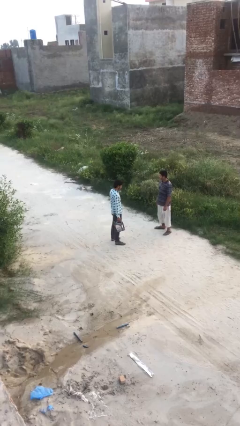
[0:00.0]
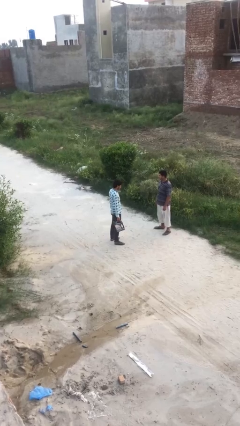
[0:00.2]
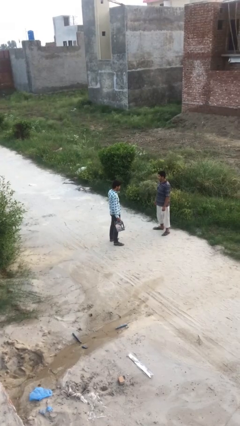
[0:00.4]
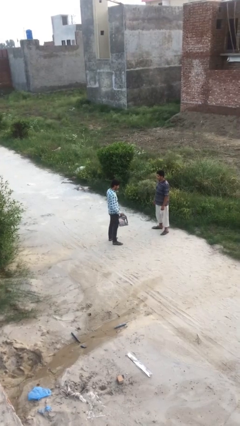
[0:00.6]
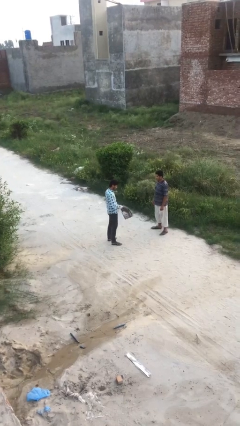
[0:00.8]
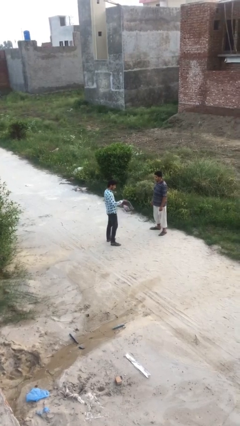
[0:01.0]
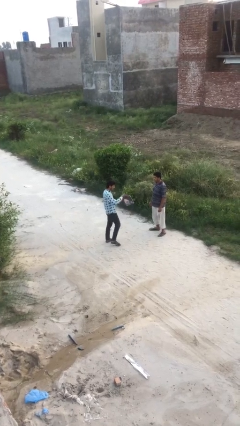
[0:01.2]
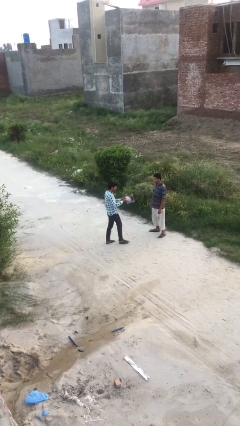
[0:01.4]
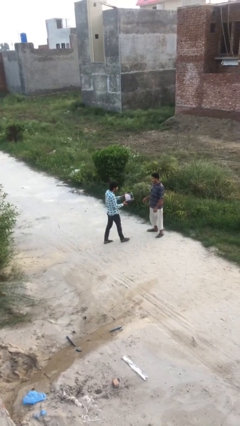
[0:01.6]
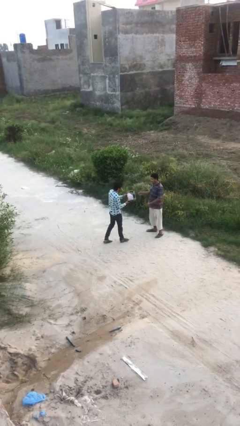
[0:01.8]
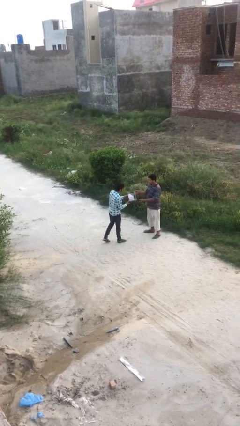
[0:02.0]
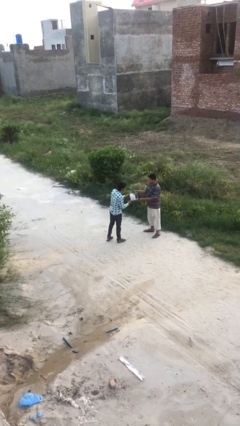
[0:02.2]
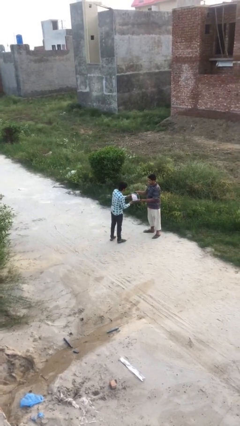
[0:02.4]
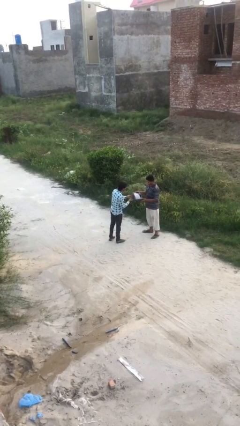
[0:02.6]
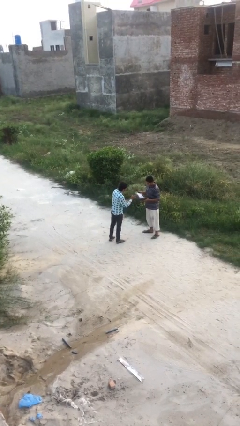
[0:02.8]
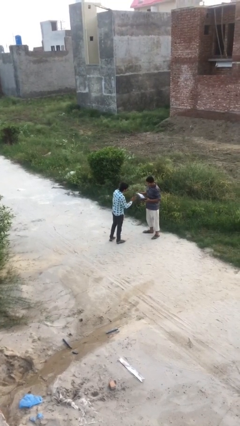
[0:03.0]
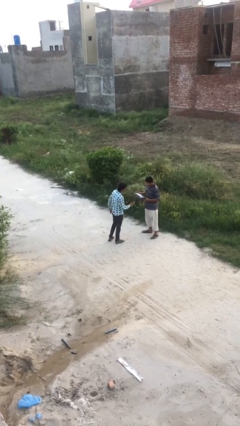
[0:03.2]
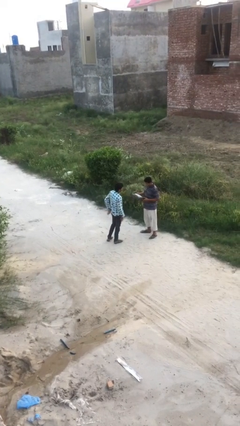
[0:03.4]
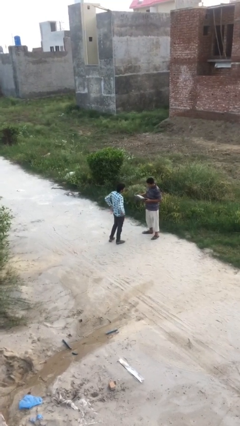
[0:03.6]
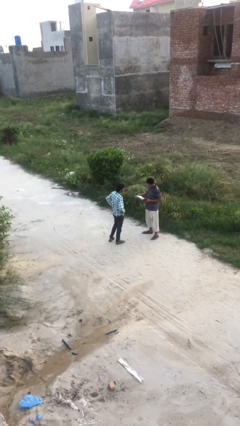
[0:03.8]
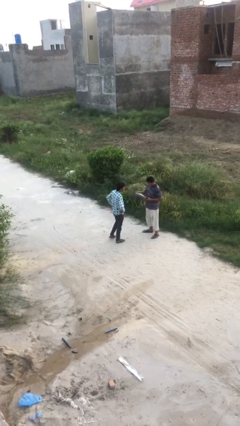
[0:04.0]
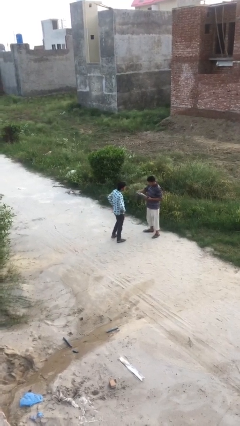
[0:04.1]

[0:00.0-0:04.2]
person transfers object to person

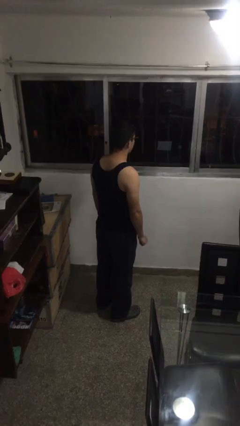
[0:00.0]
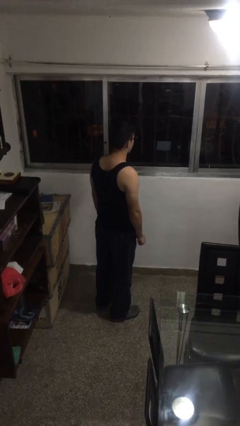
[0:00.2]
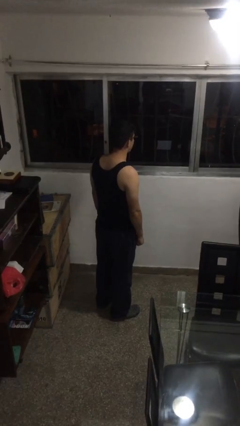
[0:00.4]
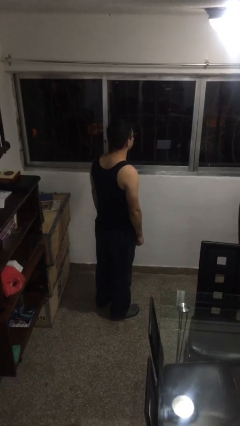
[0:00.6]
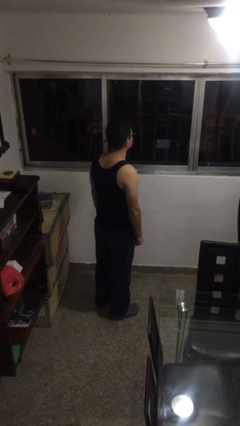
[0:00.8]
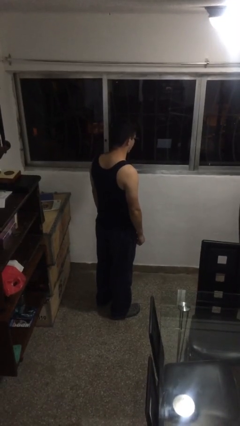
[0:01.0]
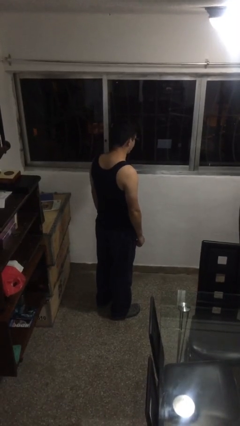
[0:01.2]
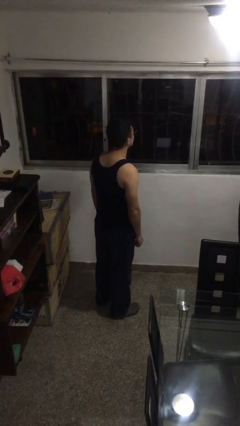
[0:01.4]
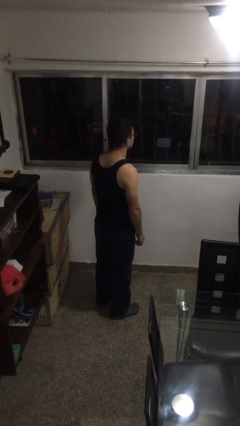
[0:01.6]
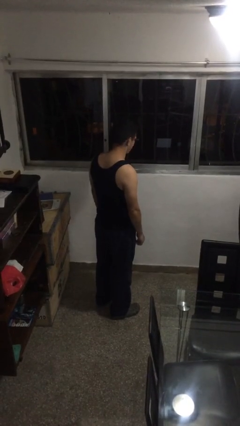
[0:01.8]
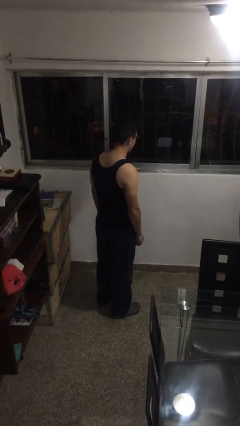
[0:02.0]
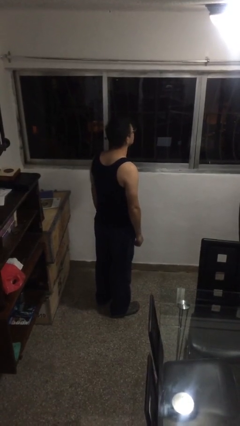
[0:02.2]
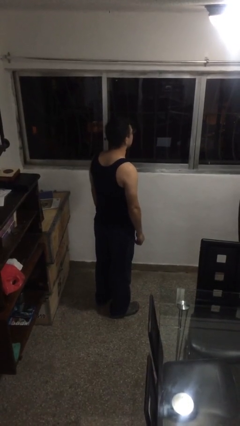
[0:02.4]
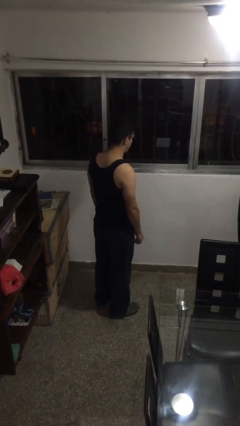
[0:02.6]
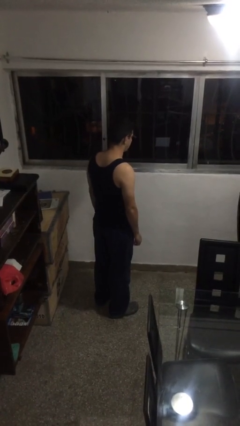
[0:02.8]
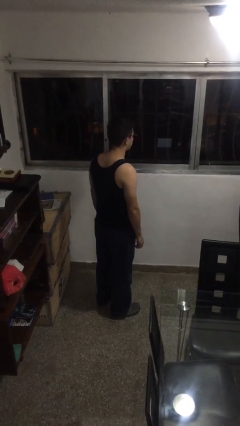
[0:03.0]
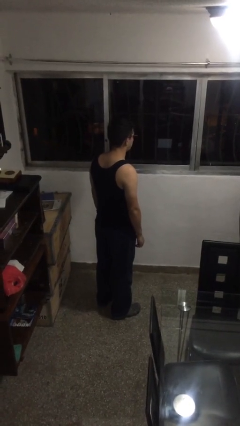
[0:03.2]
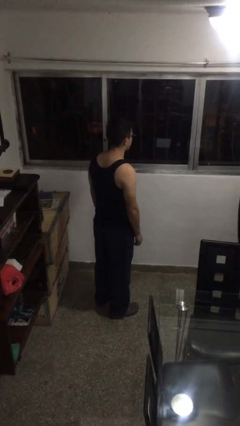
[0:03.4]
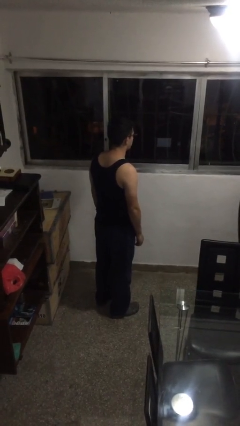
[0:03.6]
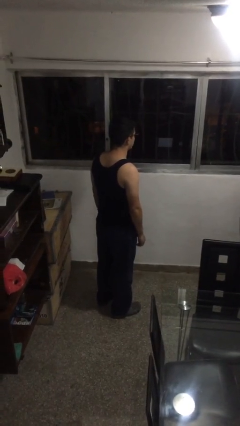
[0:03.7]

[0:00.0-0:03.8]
person nods head

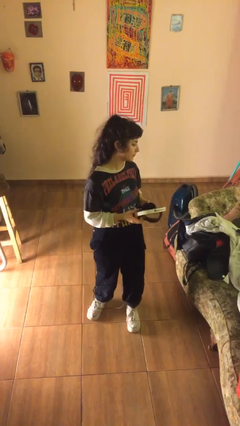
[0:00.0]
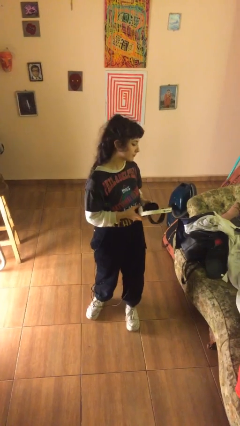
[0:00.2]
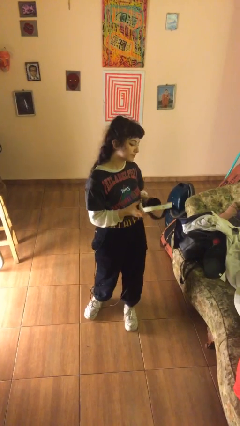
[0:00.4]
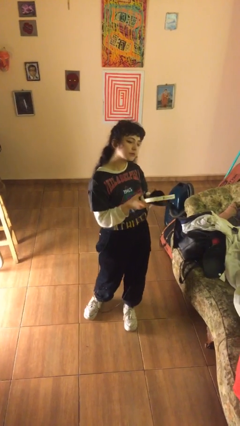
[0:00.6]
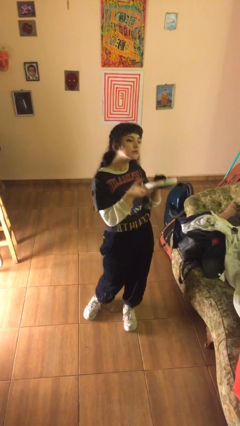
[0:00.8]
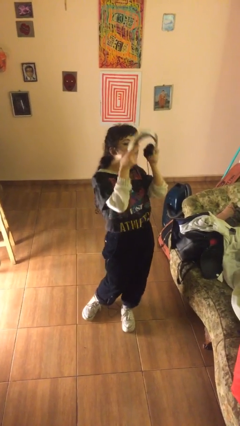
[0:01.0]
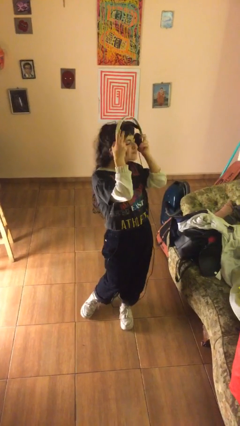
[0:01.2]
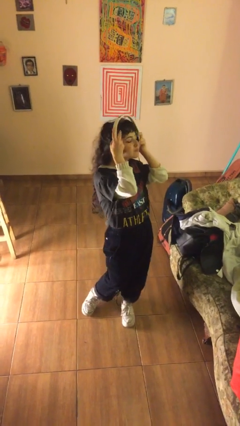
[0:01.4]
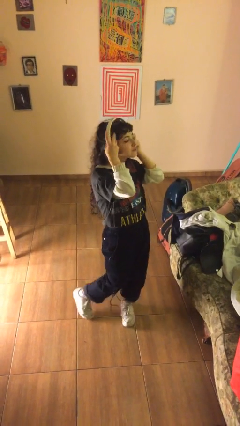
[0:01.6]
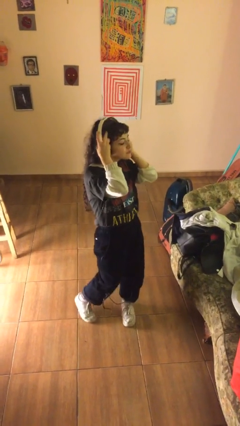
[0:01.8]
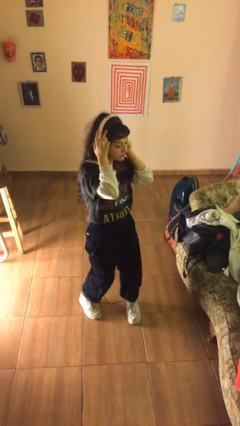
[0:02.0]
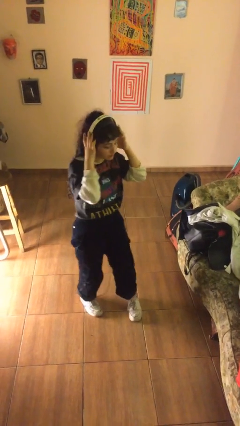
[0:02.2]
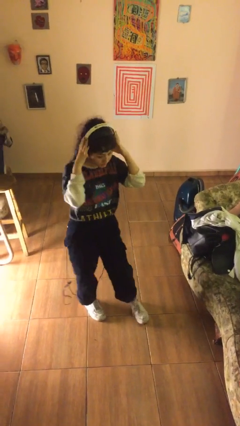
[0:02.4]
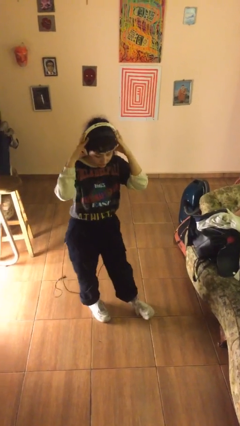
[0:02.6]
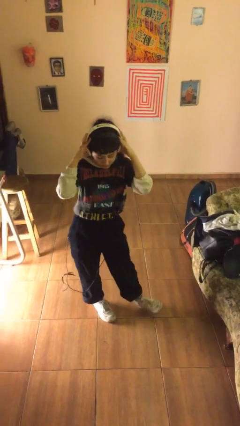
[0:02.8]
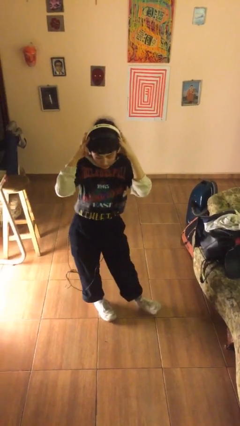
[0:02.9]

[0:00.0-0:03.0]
person puts on headphones

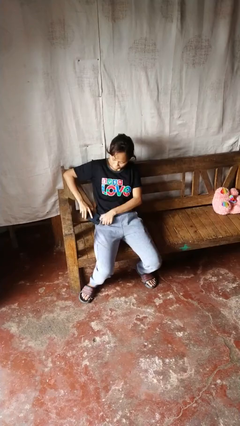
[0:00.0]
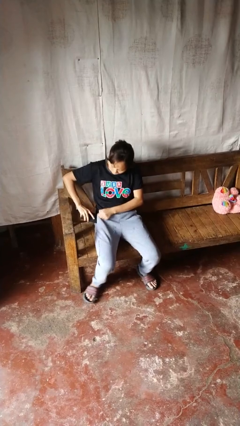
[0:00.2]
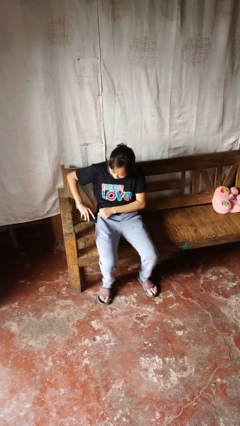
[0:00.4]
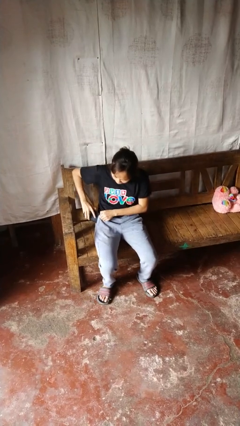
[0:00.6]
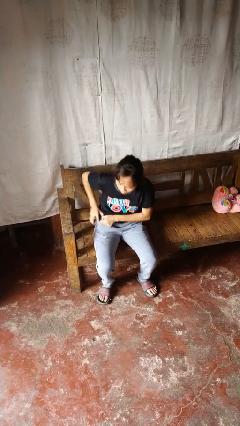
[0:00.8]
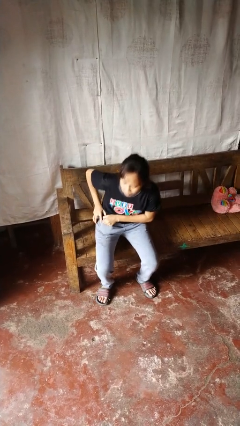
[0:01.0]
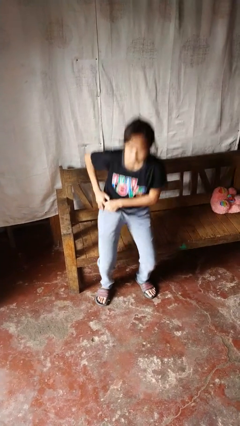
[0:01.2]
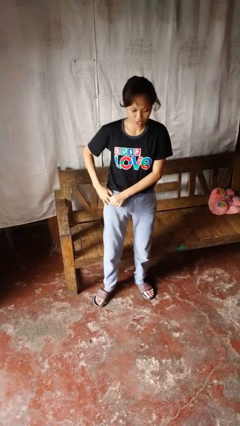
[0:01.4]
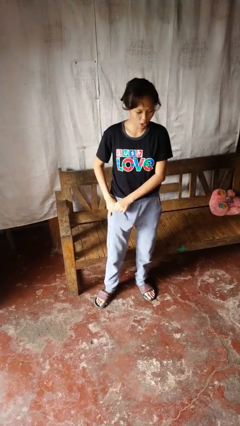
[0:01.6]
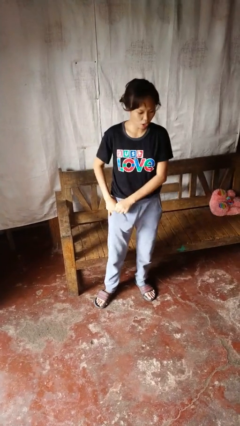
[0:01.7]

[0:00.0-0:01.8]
person puts phone into pocket

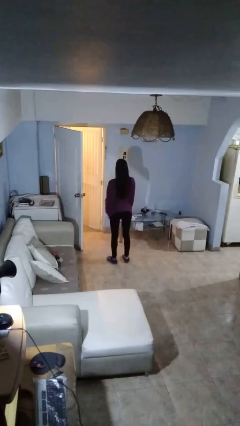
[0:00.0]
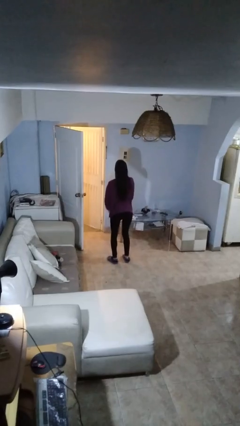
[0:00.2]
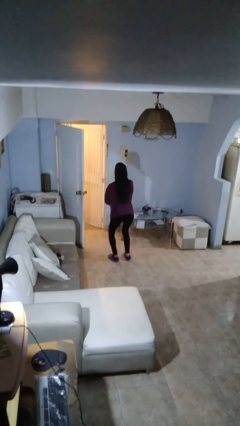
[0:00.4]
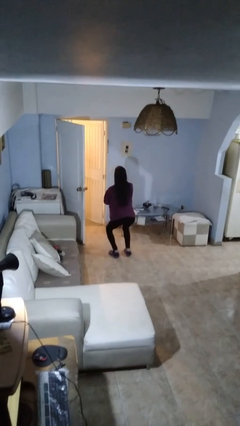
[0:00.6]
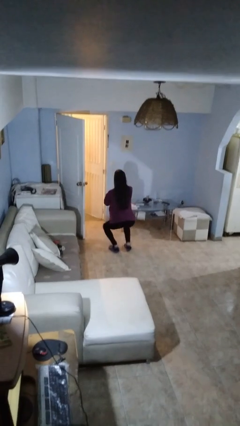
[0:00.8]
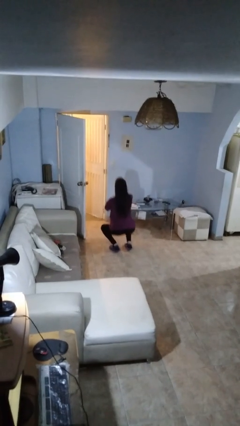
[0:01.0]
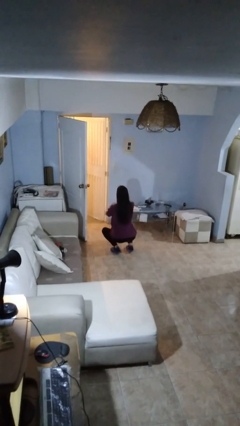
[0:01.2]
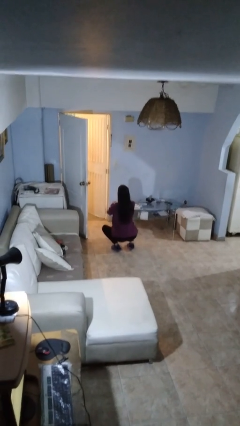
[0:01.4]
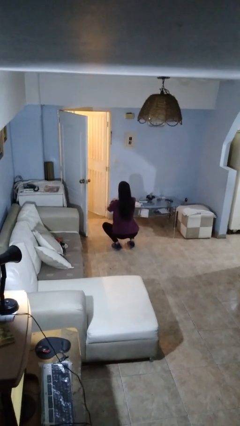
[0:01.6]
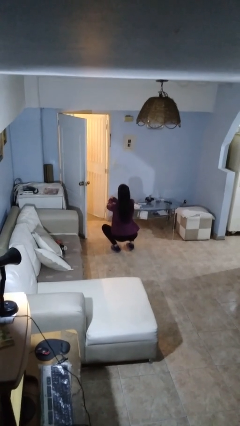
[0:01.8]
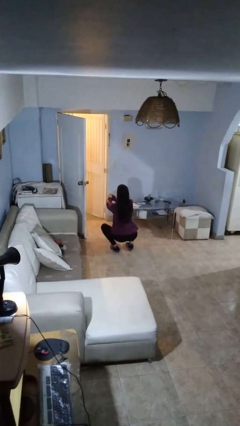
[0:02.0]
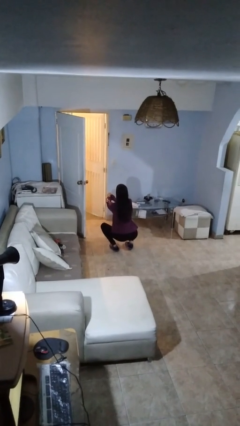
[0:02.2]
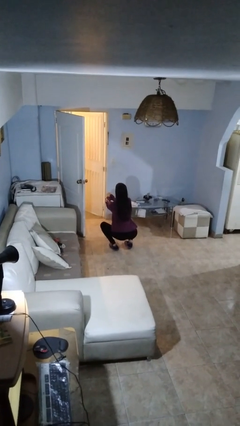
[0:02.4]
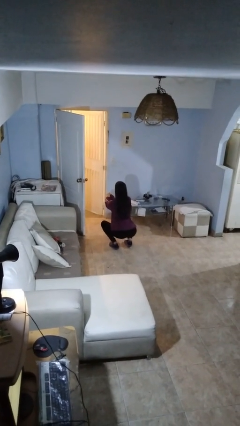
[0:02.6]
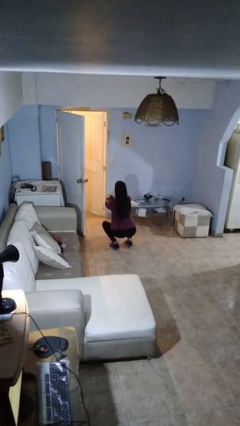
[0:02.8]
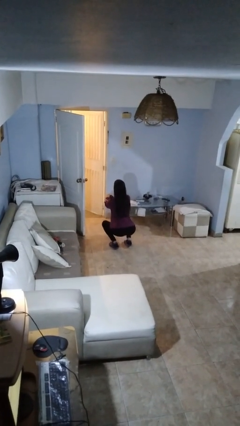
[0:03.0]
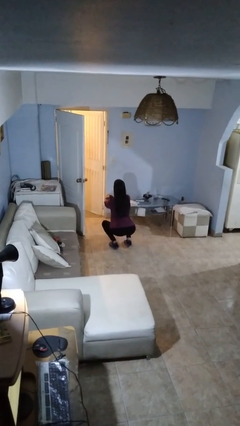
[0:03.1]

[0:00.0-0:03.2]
person squats

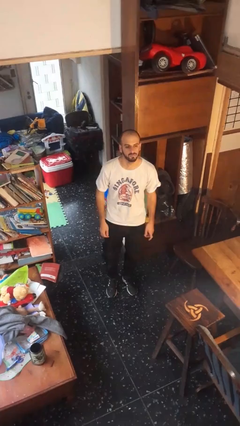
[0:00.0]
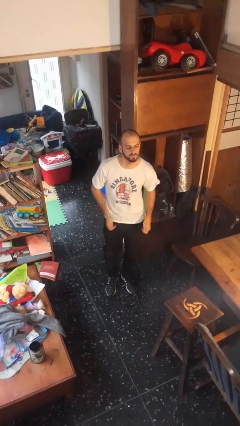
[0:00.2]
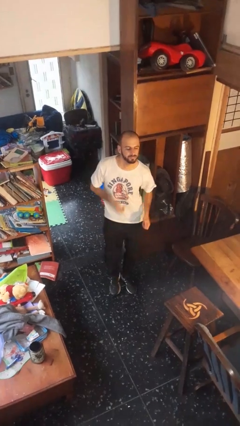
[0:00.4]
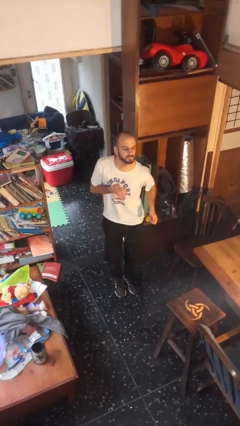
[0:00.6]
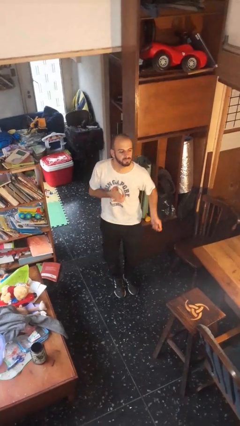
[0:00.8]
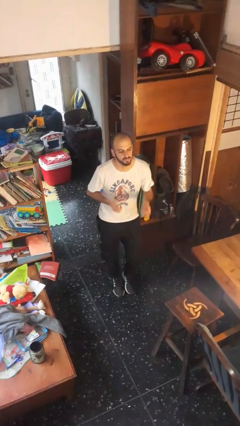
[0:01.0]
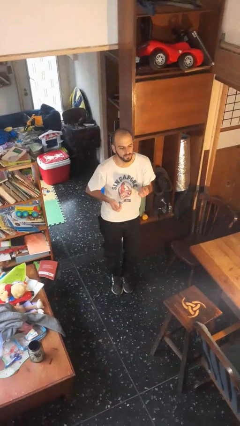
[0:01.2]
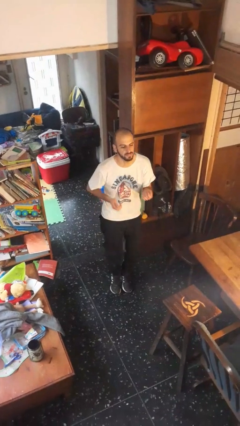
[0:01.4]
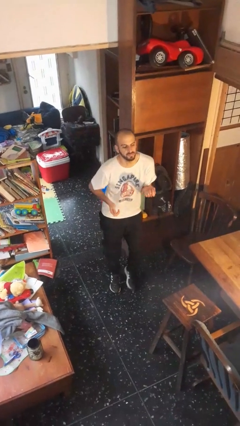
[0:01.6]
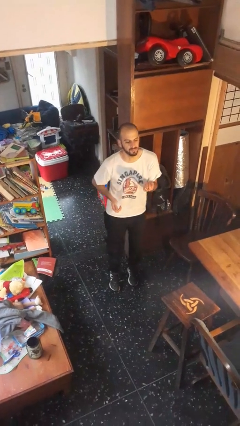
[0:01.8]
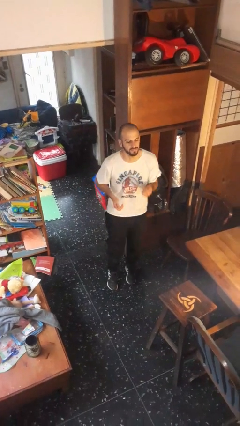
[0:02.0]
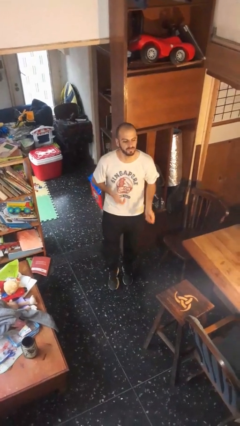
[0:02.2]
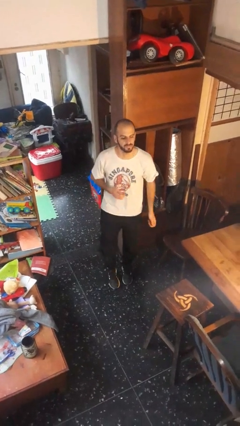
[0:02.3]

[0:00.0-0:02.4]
person dances in place
